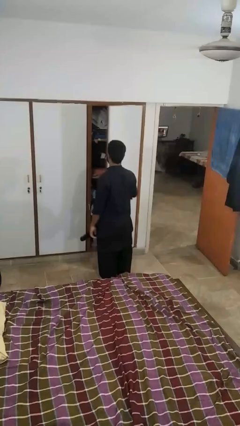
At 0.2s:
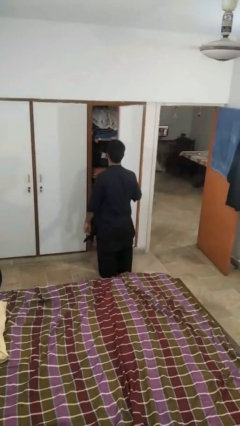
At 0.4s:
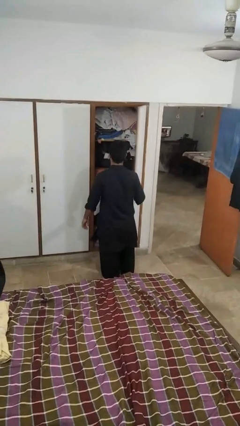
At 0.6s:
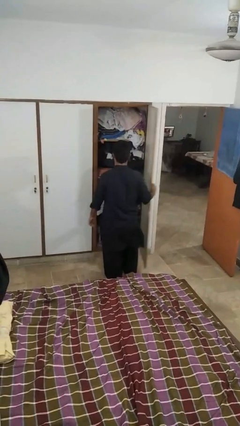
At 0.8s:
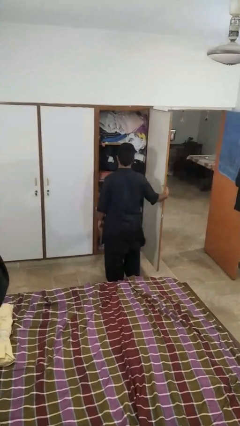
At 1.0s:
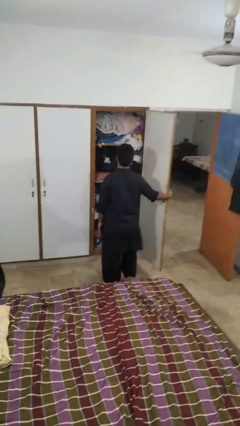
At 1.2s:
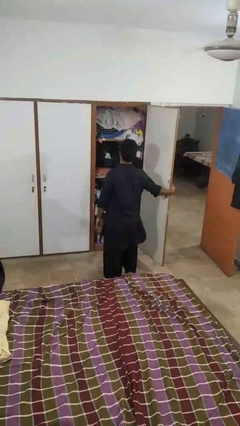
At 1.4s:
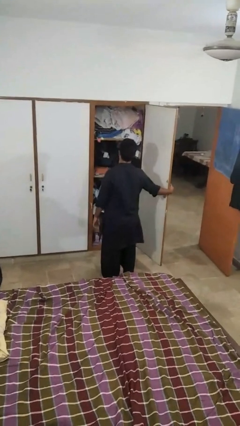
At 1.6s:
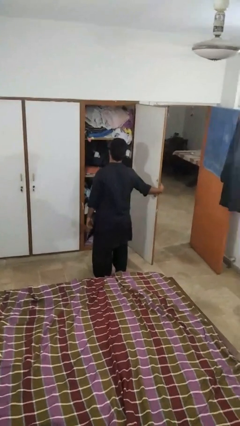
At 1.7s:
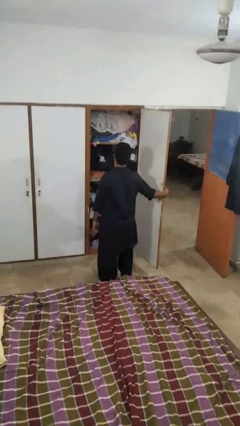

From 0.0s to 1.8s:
person opens closet door

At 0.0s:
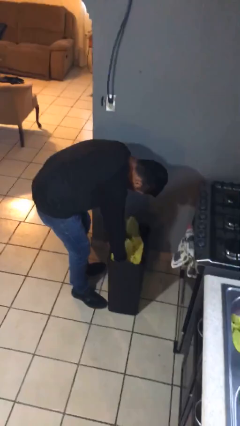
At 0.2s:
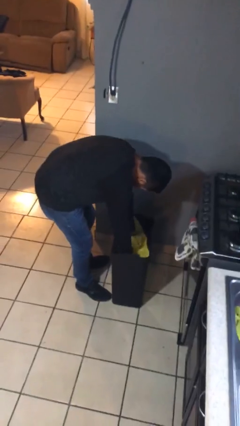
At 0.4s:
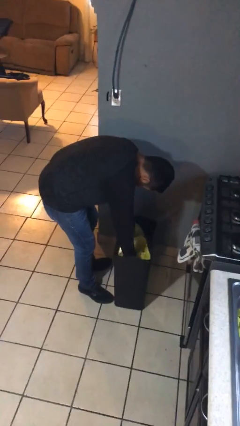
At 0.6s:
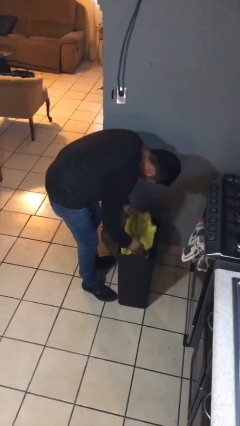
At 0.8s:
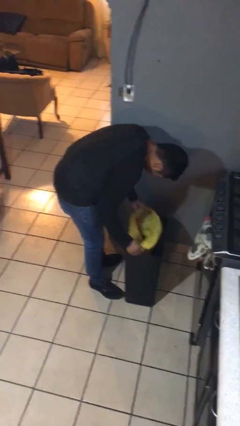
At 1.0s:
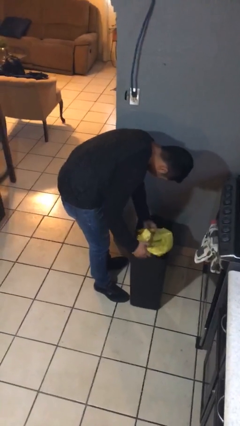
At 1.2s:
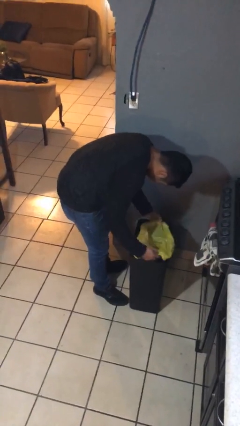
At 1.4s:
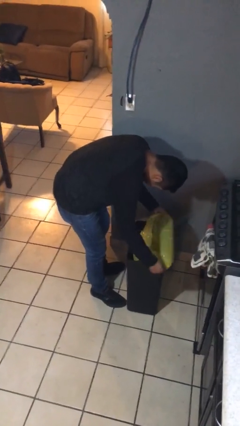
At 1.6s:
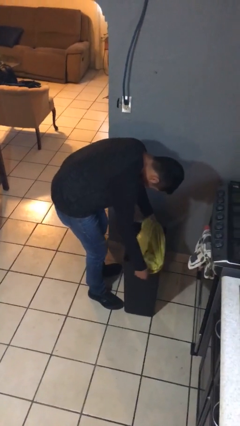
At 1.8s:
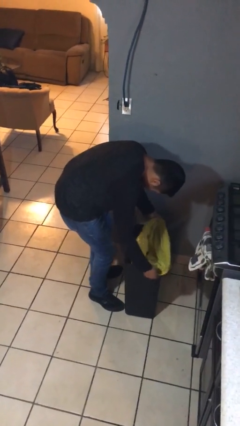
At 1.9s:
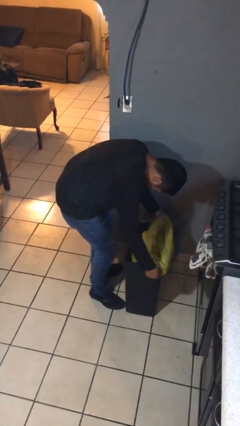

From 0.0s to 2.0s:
person inserts trashbag into trashcan

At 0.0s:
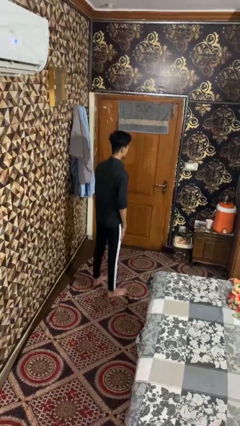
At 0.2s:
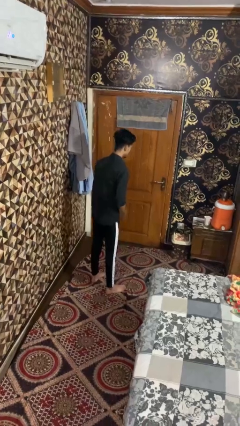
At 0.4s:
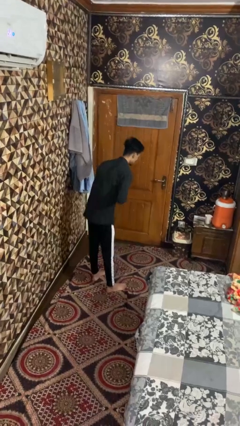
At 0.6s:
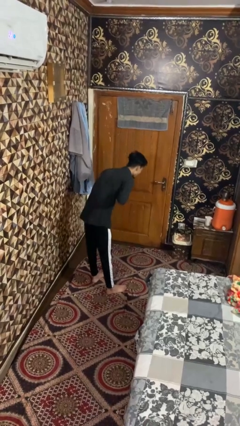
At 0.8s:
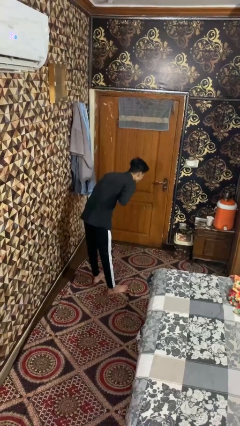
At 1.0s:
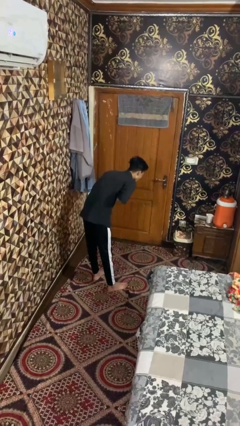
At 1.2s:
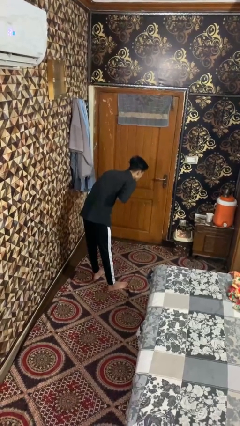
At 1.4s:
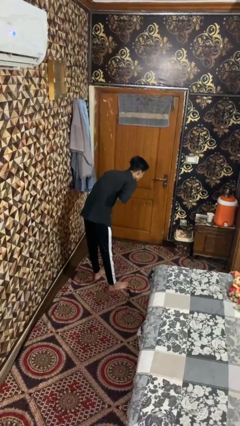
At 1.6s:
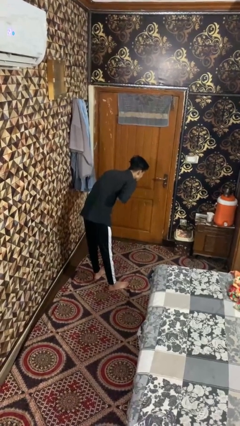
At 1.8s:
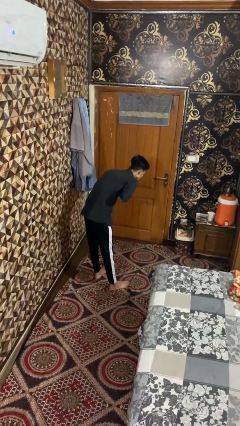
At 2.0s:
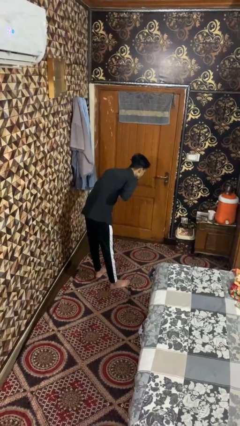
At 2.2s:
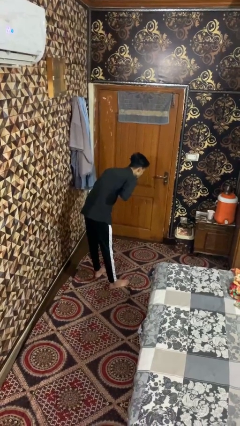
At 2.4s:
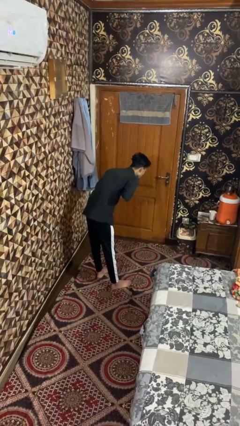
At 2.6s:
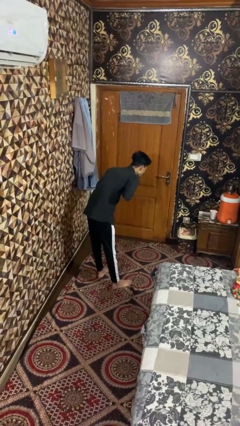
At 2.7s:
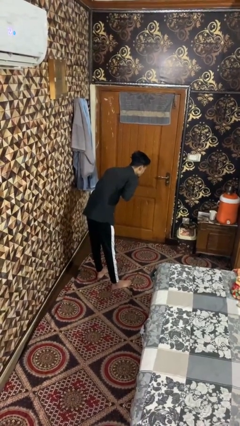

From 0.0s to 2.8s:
person bows

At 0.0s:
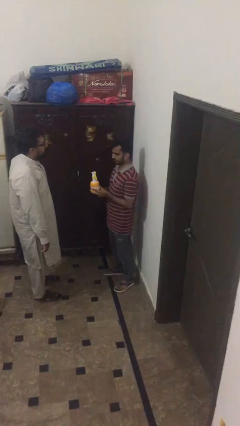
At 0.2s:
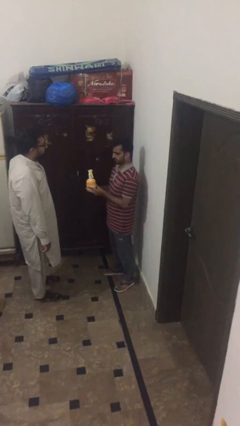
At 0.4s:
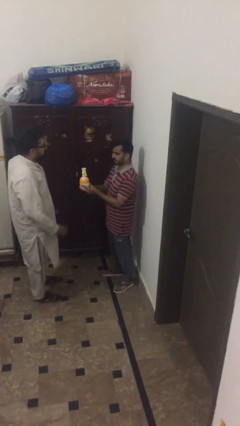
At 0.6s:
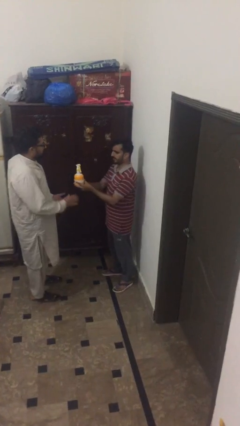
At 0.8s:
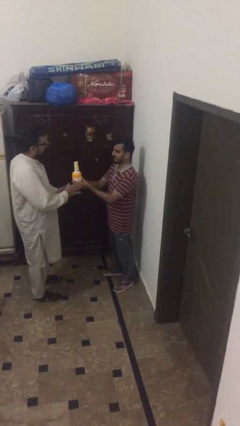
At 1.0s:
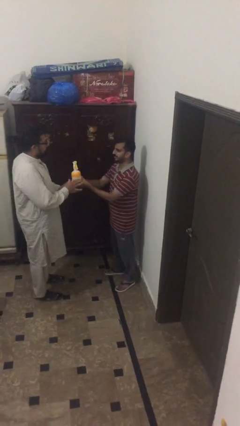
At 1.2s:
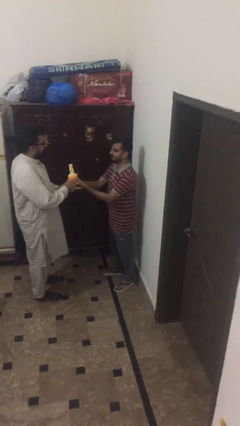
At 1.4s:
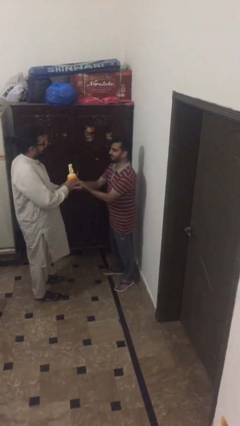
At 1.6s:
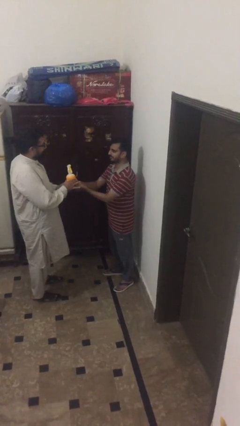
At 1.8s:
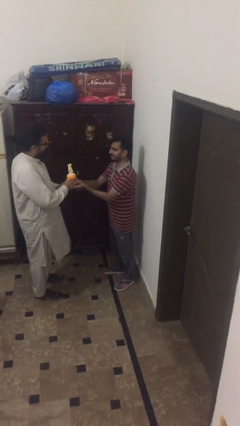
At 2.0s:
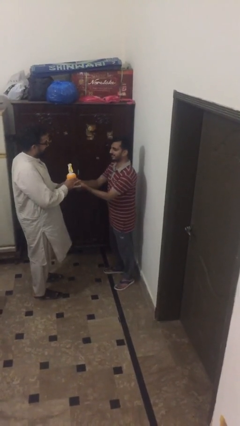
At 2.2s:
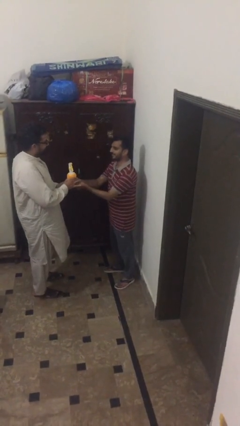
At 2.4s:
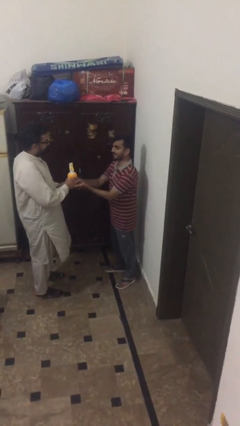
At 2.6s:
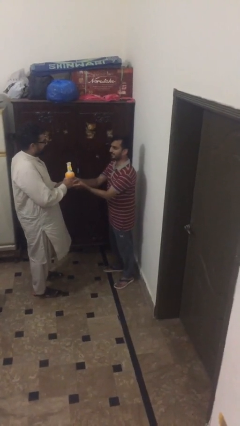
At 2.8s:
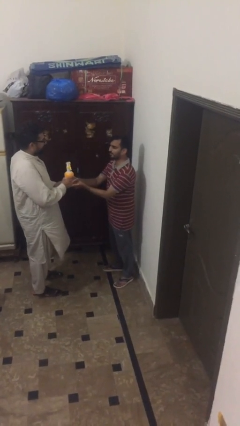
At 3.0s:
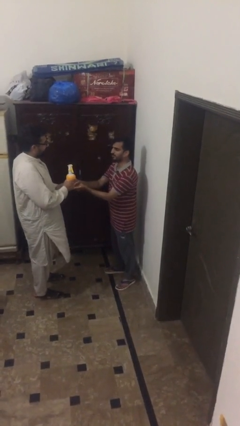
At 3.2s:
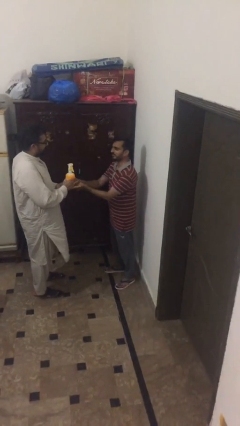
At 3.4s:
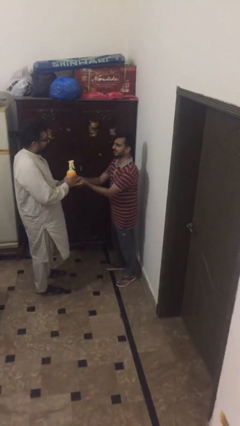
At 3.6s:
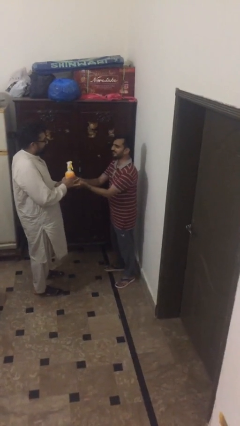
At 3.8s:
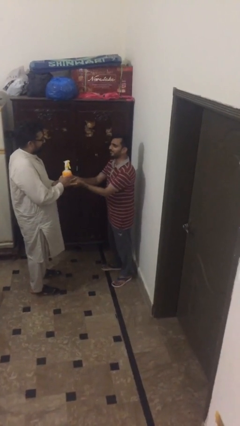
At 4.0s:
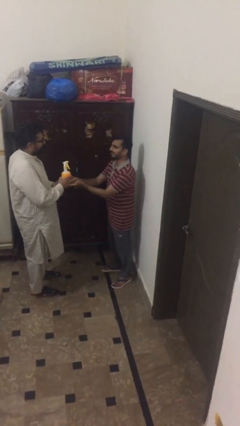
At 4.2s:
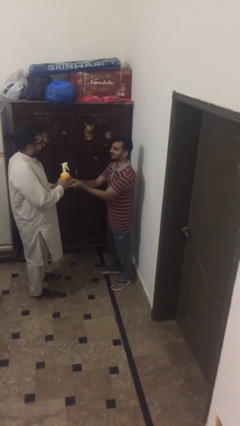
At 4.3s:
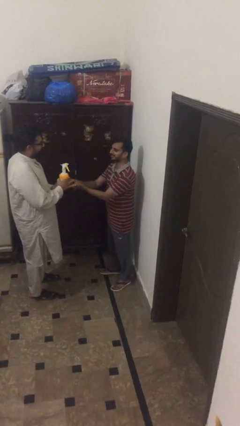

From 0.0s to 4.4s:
person transfers object to person

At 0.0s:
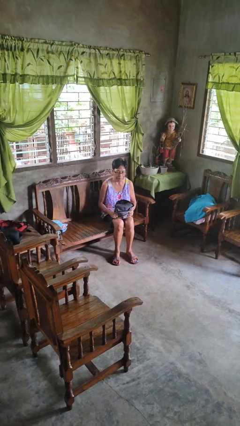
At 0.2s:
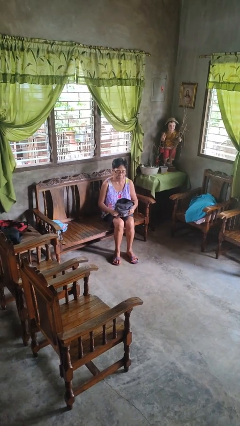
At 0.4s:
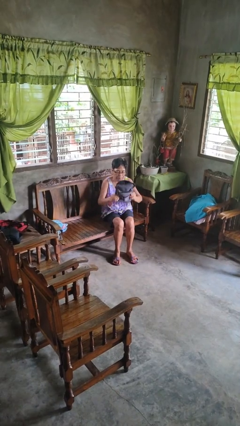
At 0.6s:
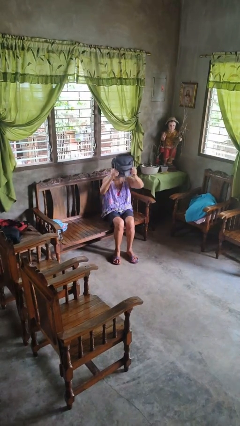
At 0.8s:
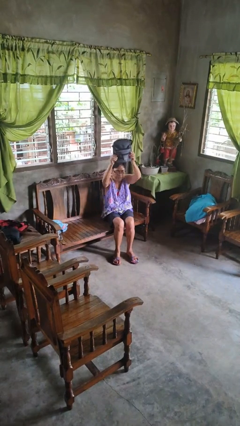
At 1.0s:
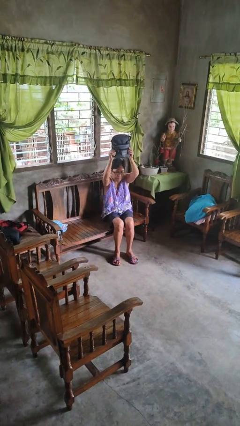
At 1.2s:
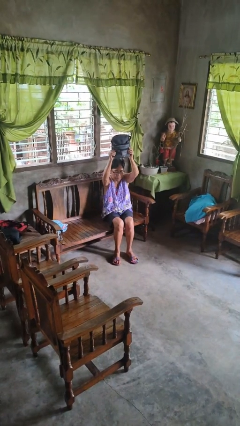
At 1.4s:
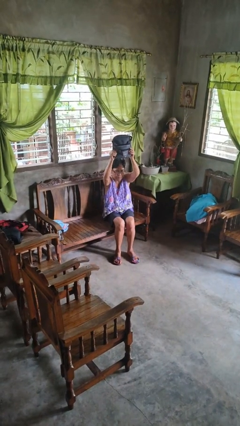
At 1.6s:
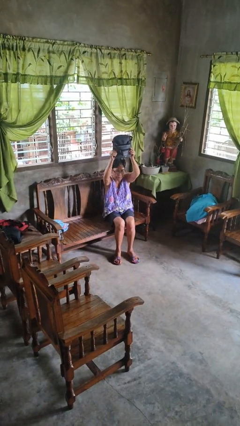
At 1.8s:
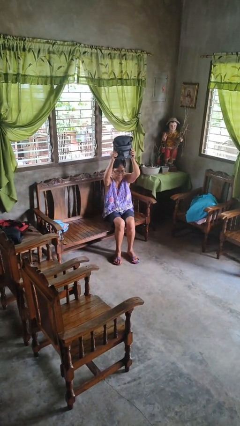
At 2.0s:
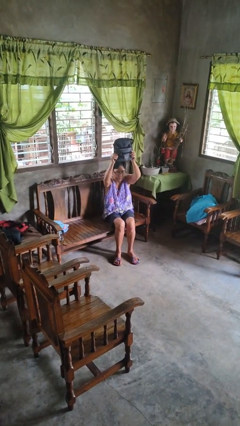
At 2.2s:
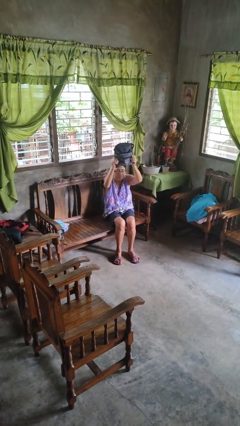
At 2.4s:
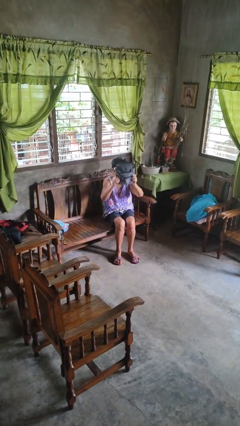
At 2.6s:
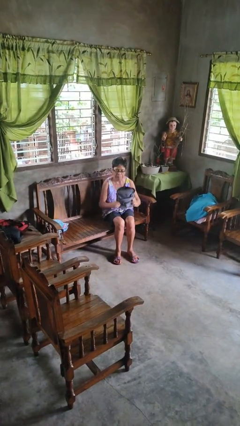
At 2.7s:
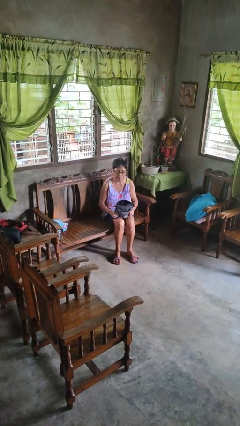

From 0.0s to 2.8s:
person holds object above head

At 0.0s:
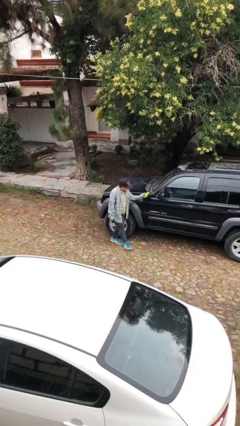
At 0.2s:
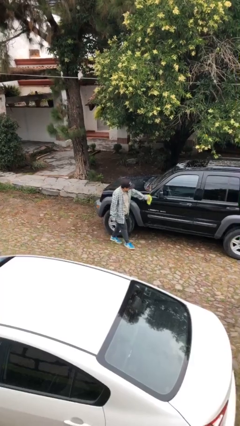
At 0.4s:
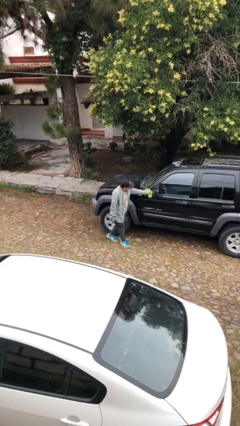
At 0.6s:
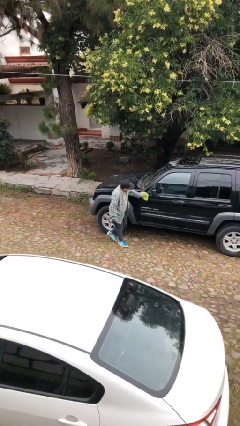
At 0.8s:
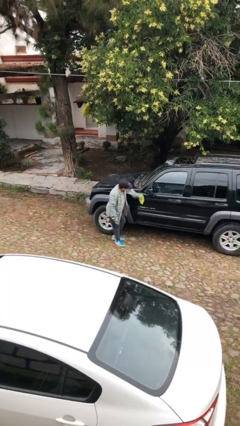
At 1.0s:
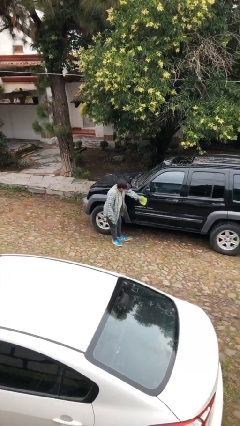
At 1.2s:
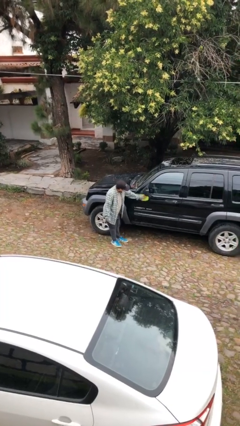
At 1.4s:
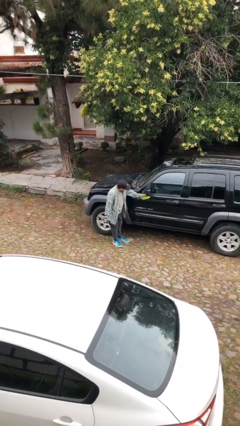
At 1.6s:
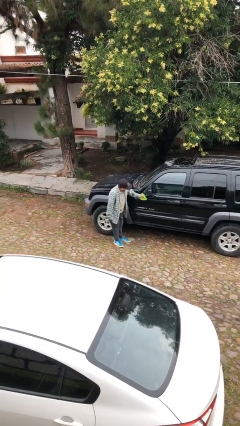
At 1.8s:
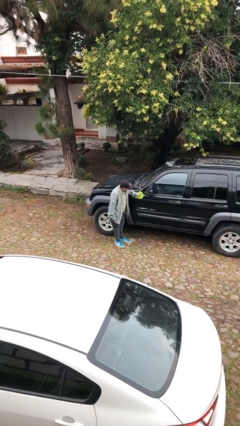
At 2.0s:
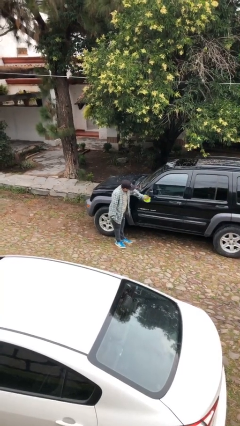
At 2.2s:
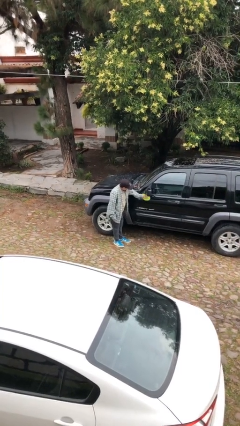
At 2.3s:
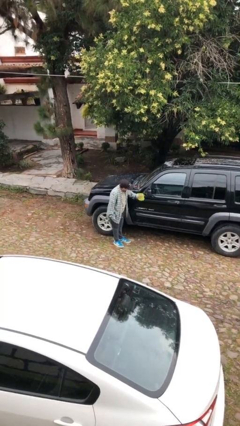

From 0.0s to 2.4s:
person polishes car with rag

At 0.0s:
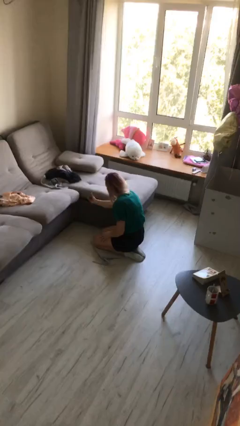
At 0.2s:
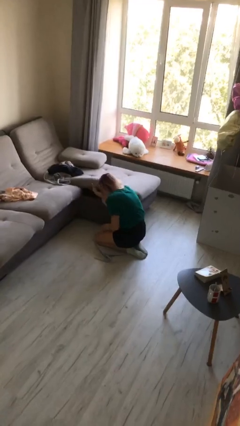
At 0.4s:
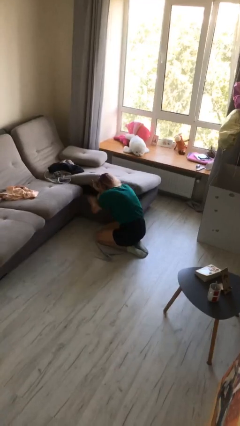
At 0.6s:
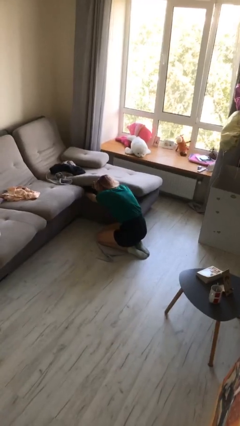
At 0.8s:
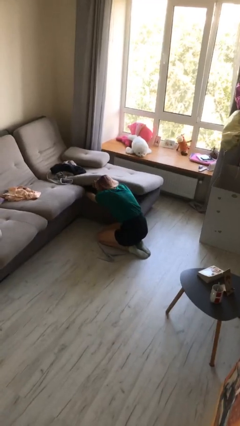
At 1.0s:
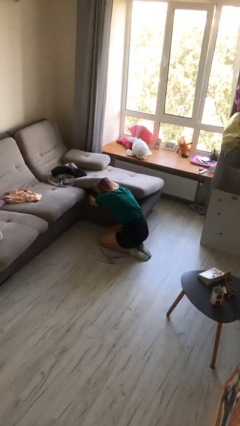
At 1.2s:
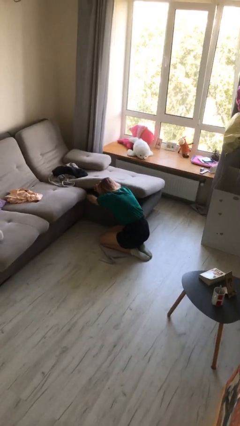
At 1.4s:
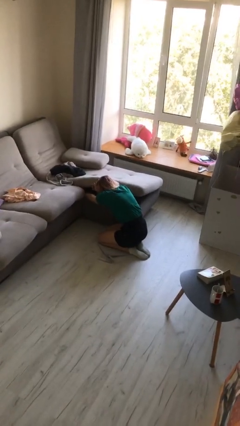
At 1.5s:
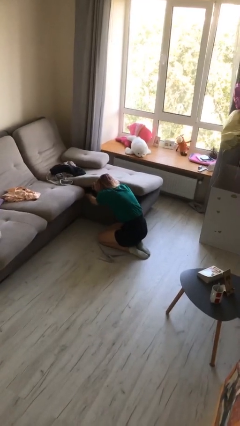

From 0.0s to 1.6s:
person searches under couch
